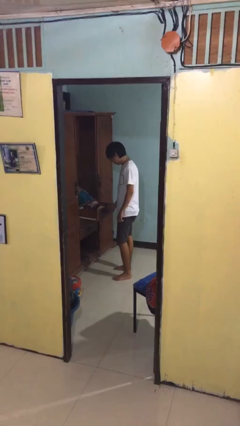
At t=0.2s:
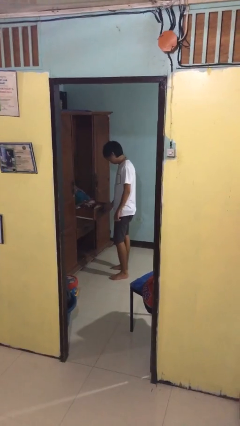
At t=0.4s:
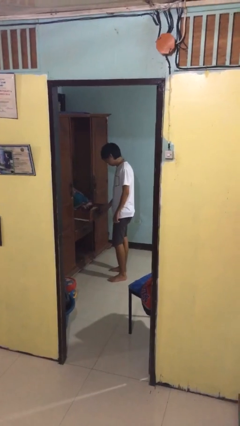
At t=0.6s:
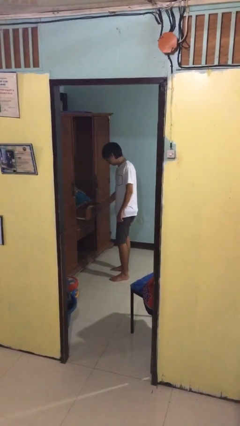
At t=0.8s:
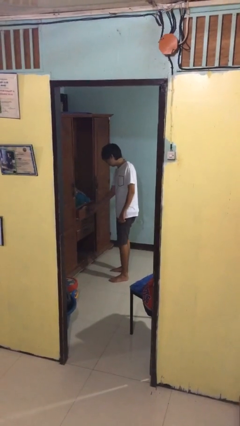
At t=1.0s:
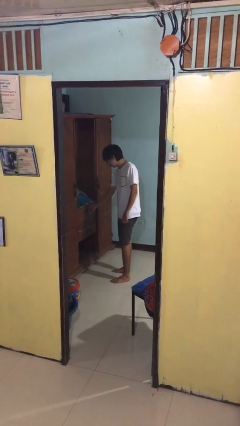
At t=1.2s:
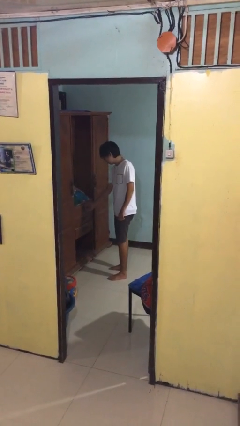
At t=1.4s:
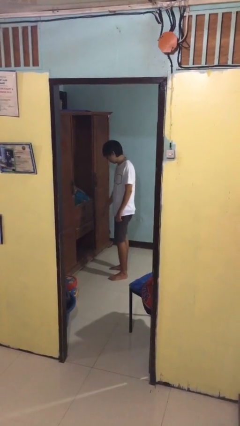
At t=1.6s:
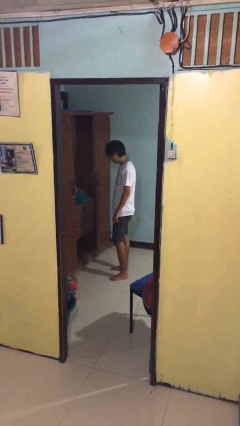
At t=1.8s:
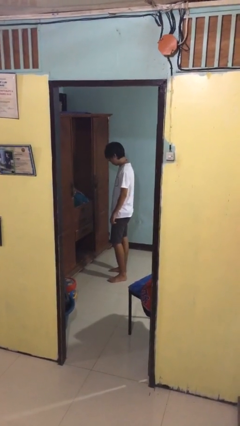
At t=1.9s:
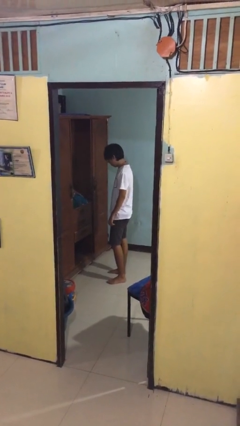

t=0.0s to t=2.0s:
person closes dresser drawer

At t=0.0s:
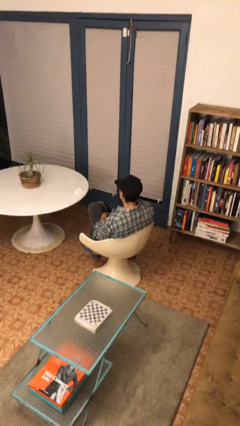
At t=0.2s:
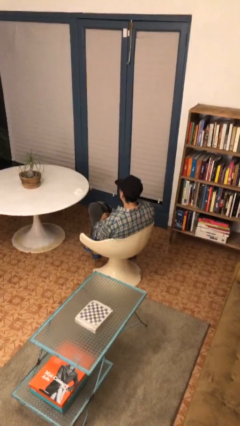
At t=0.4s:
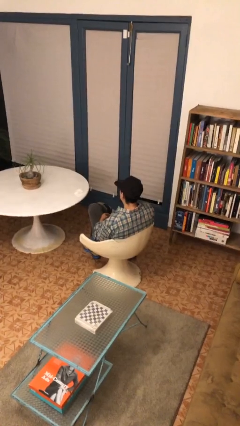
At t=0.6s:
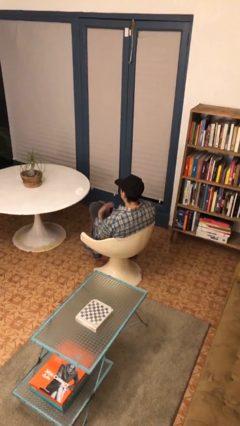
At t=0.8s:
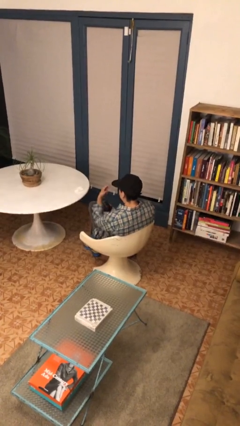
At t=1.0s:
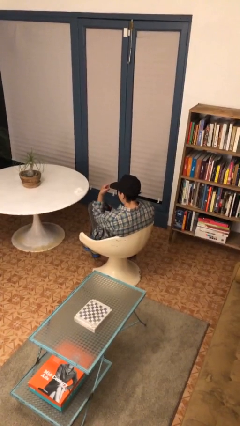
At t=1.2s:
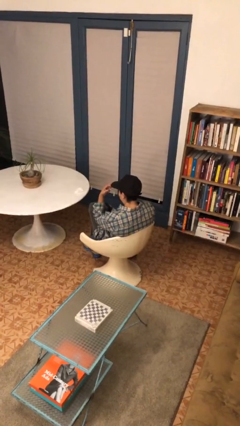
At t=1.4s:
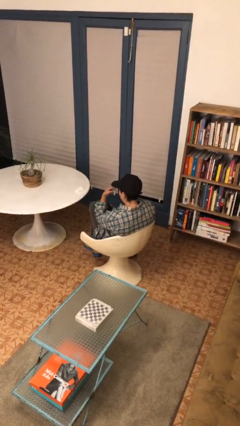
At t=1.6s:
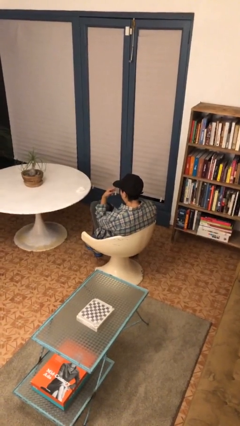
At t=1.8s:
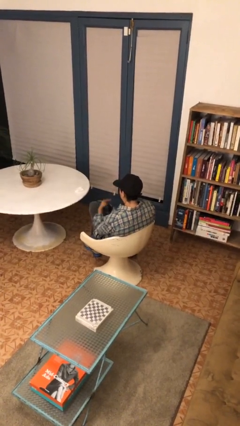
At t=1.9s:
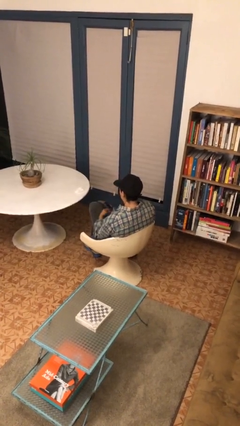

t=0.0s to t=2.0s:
person gestures watch closely

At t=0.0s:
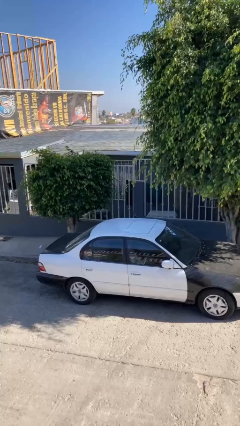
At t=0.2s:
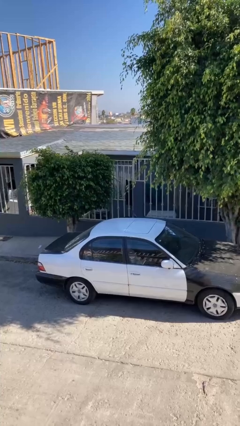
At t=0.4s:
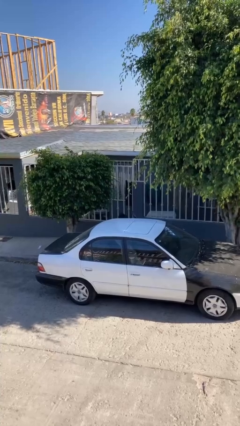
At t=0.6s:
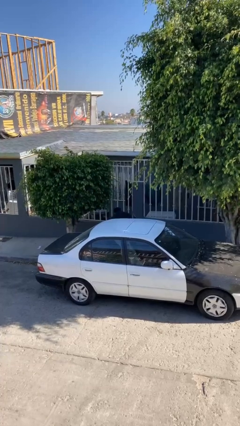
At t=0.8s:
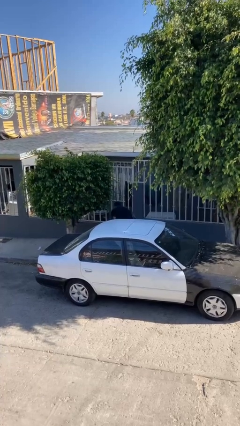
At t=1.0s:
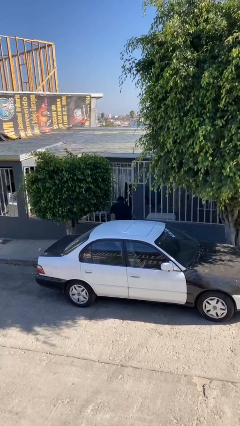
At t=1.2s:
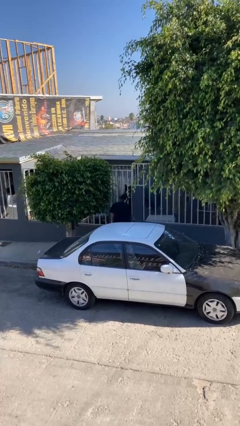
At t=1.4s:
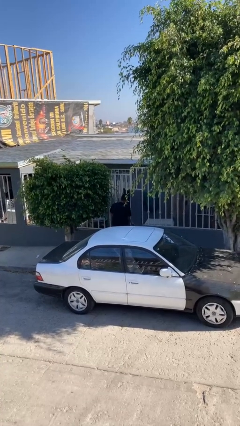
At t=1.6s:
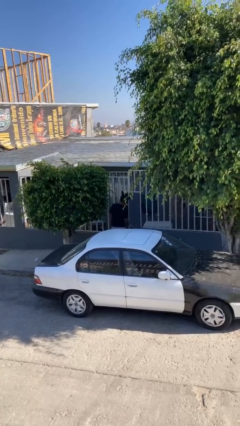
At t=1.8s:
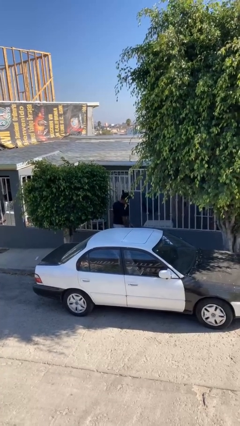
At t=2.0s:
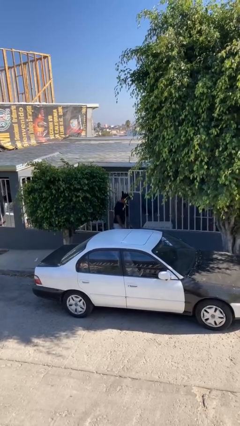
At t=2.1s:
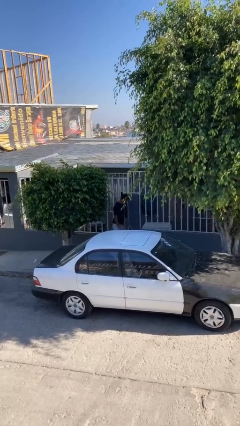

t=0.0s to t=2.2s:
person exits car

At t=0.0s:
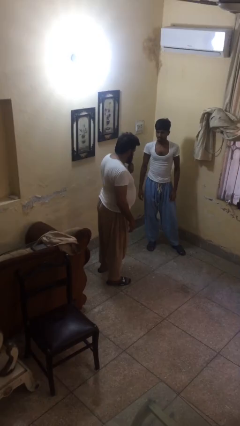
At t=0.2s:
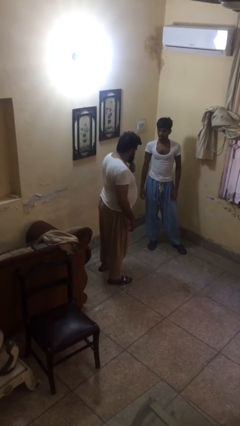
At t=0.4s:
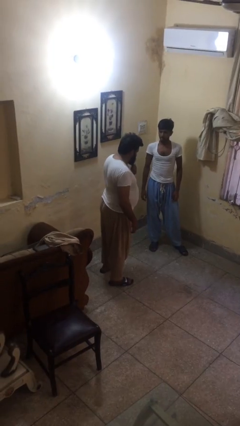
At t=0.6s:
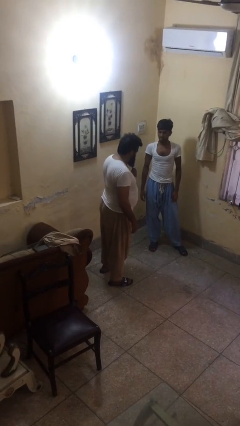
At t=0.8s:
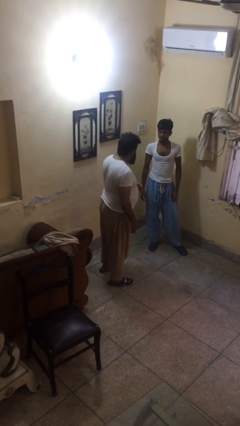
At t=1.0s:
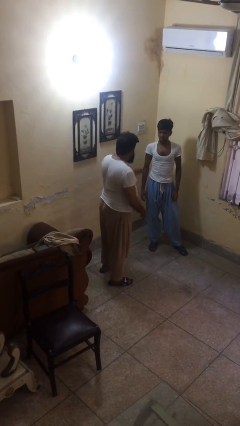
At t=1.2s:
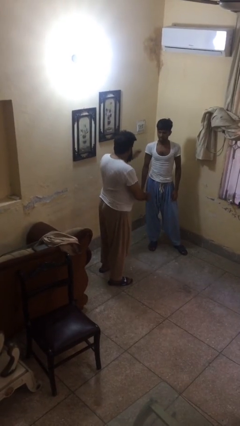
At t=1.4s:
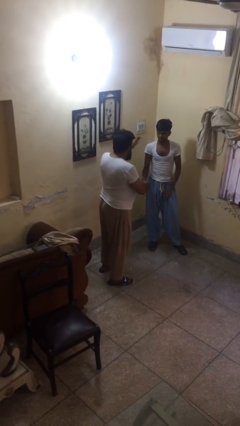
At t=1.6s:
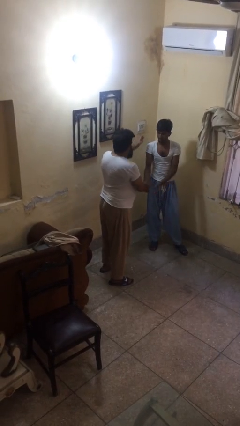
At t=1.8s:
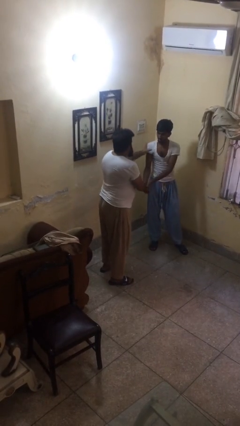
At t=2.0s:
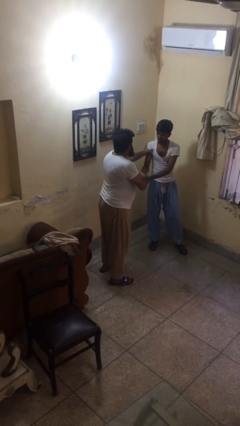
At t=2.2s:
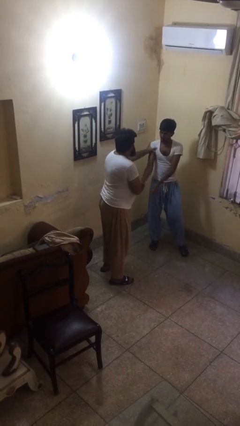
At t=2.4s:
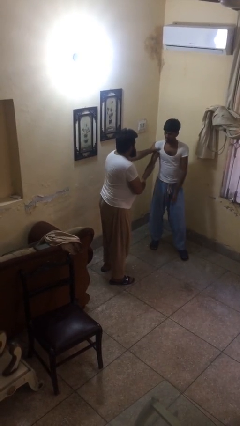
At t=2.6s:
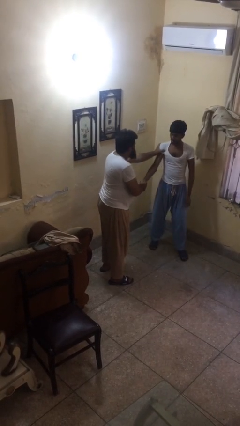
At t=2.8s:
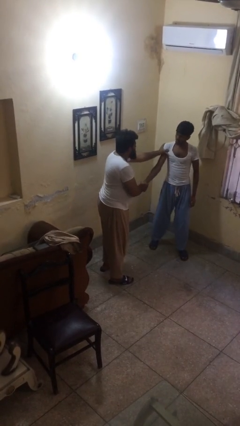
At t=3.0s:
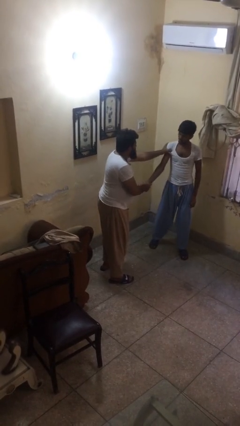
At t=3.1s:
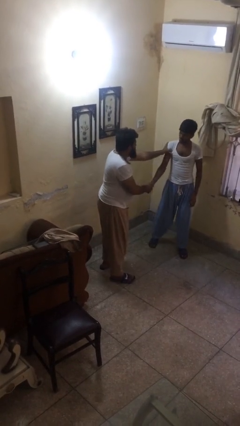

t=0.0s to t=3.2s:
person shakes hand

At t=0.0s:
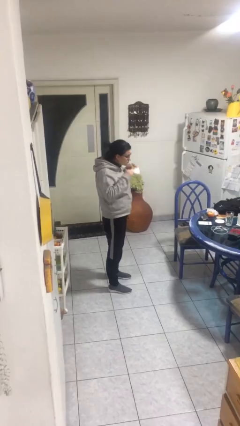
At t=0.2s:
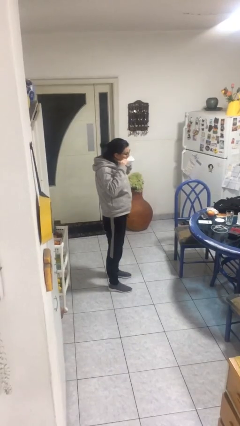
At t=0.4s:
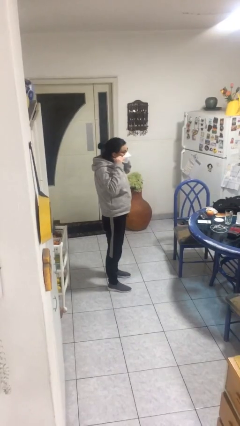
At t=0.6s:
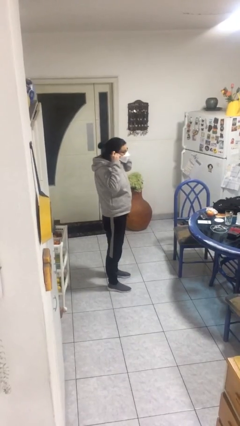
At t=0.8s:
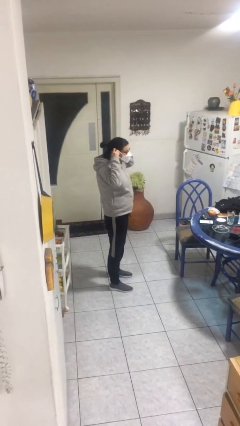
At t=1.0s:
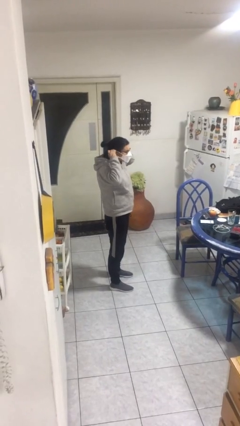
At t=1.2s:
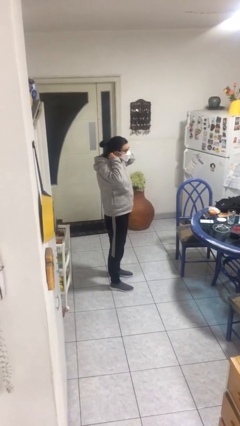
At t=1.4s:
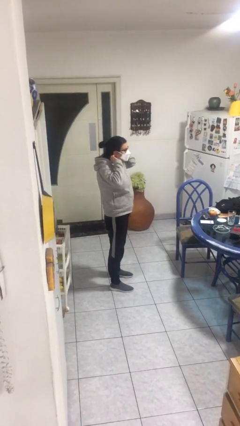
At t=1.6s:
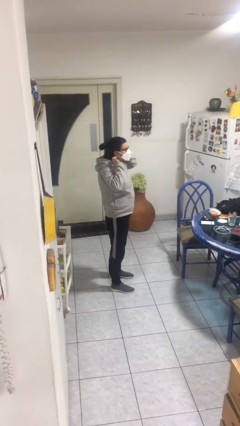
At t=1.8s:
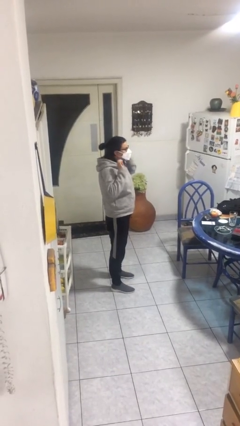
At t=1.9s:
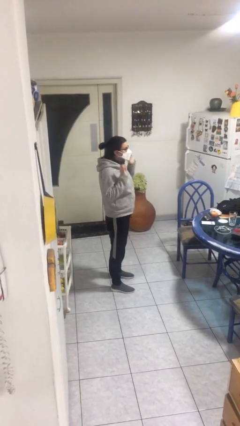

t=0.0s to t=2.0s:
person puts on facemask

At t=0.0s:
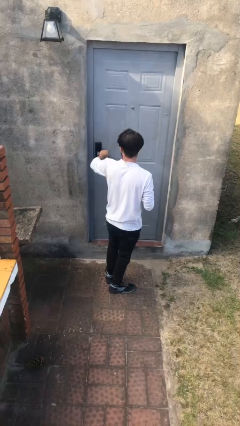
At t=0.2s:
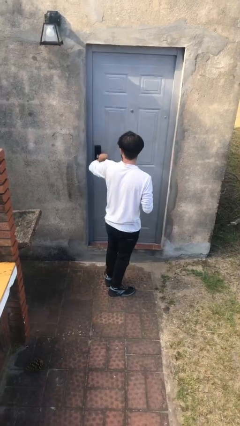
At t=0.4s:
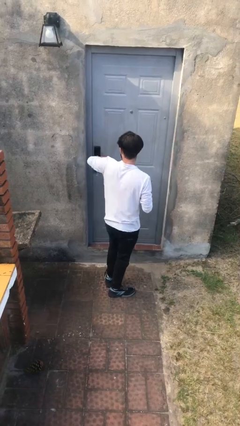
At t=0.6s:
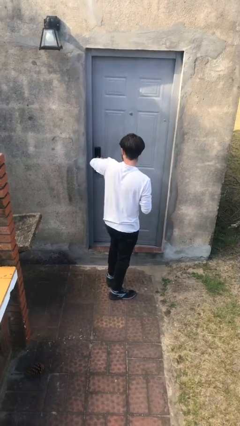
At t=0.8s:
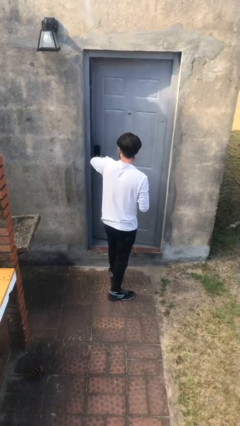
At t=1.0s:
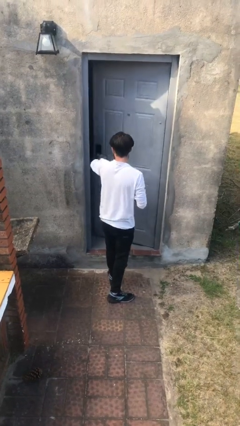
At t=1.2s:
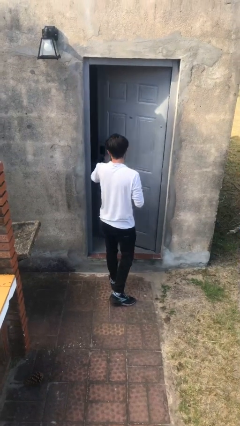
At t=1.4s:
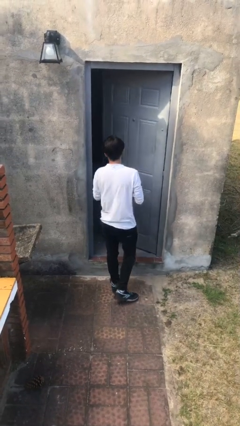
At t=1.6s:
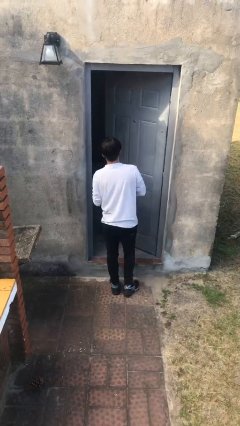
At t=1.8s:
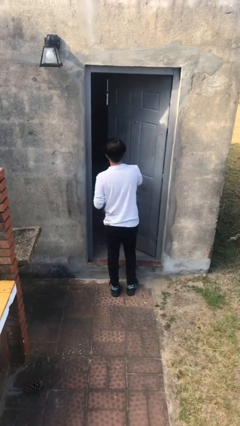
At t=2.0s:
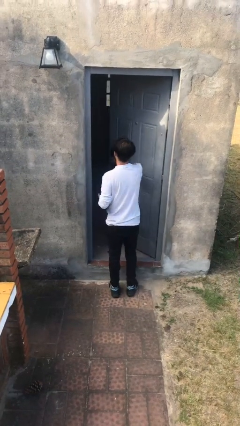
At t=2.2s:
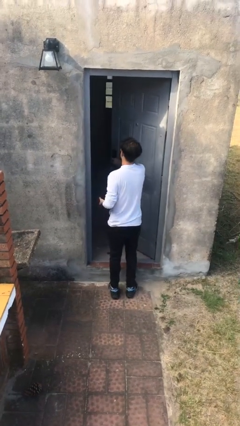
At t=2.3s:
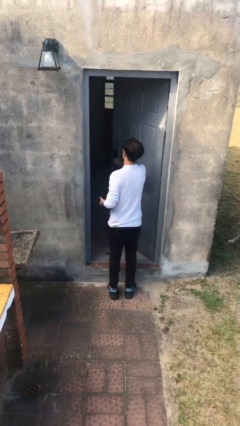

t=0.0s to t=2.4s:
person opens facility door

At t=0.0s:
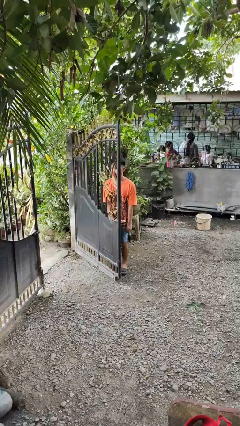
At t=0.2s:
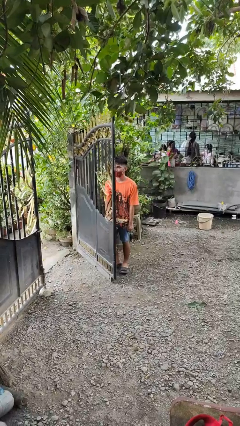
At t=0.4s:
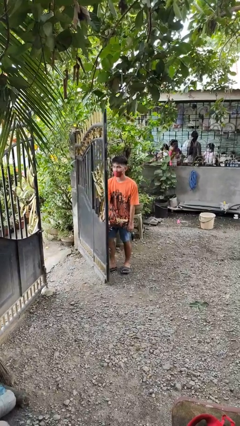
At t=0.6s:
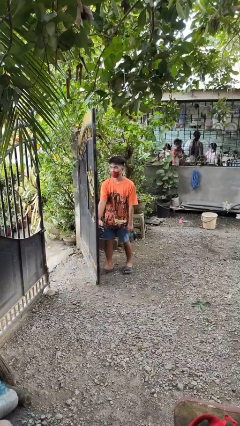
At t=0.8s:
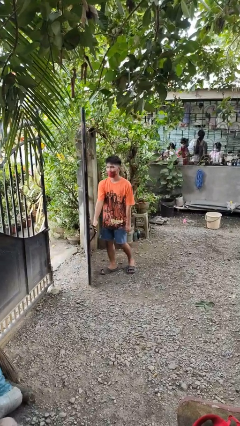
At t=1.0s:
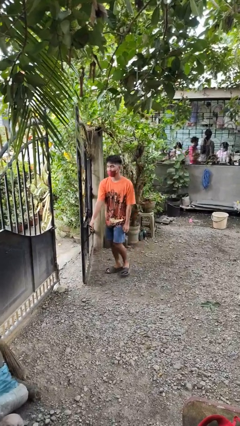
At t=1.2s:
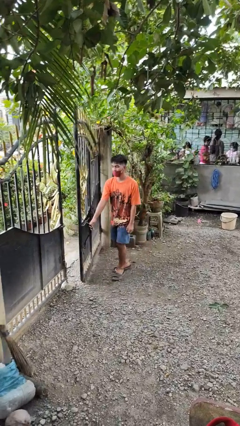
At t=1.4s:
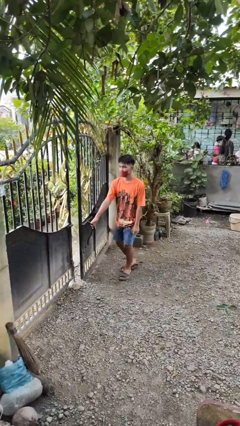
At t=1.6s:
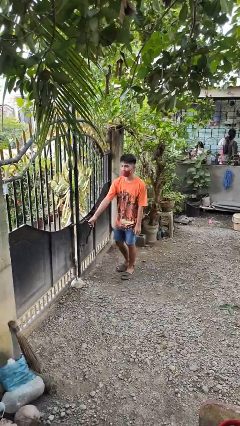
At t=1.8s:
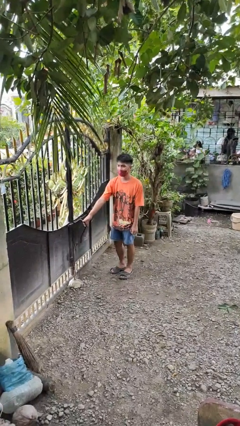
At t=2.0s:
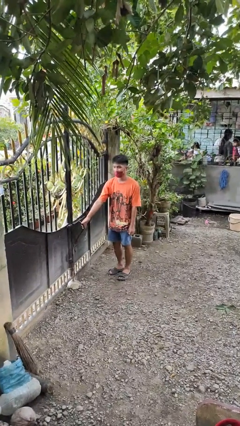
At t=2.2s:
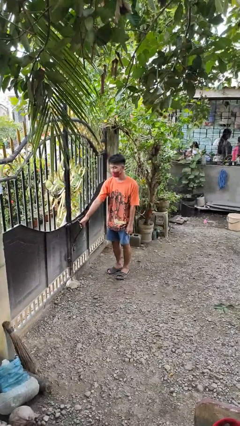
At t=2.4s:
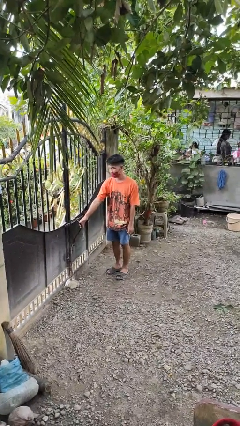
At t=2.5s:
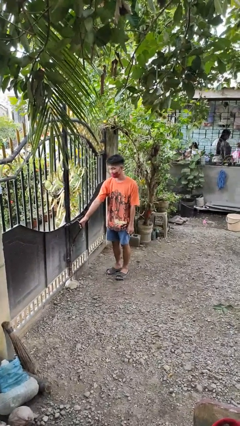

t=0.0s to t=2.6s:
person closes gate

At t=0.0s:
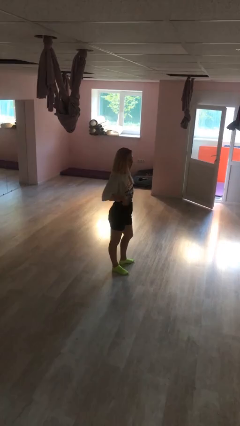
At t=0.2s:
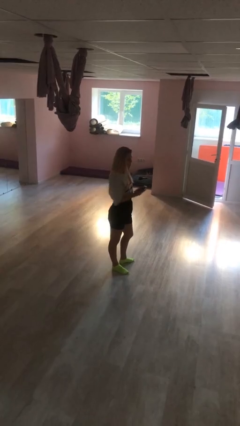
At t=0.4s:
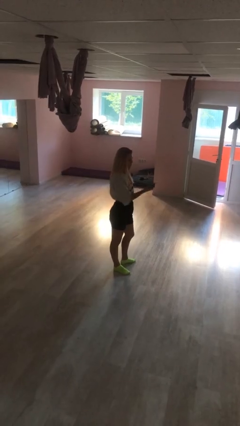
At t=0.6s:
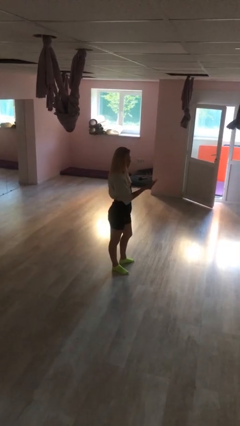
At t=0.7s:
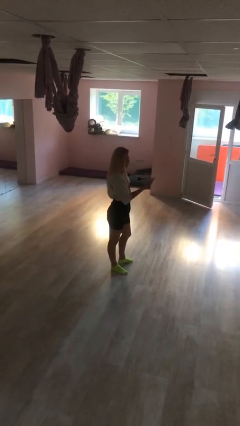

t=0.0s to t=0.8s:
person takes phone from pocket
